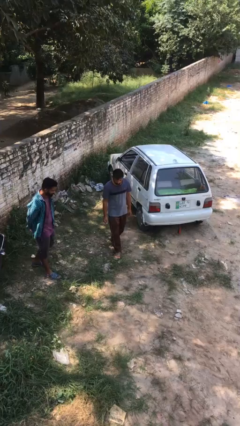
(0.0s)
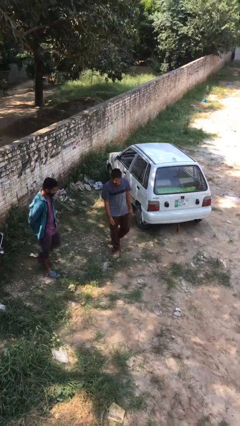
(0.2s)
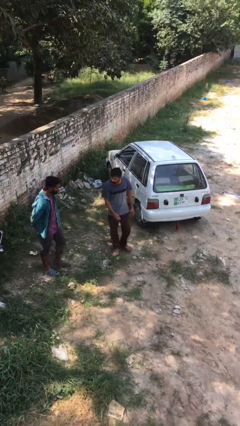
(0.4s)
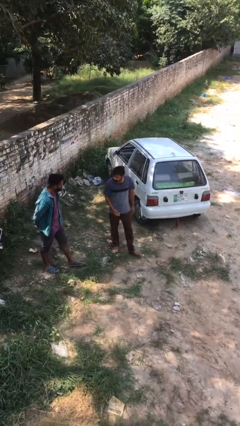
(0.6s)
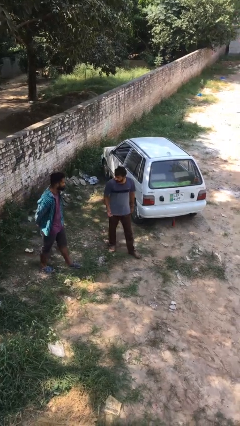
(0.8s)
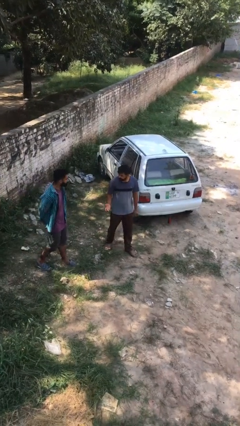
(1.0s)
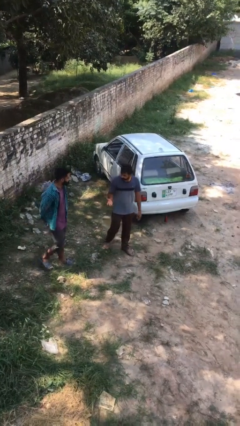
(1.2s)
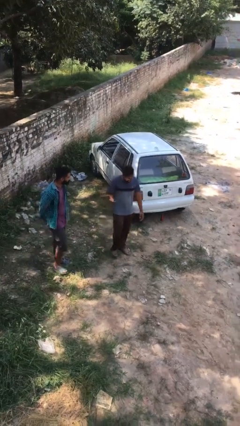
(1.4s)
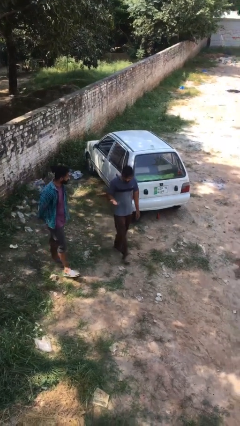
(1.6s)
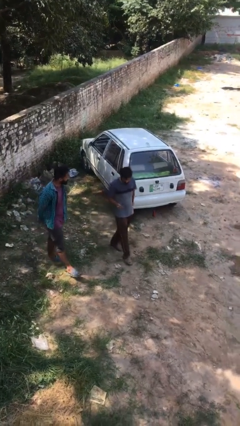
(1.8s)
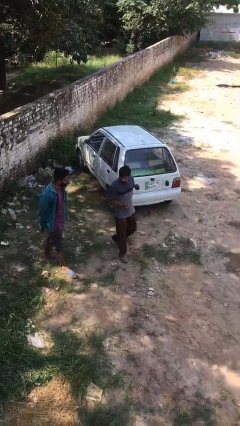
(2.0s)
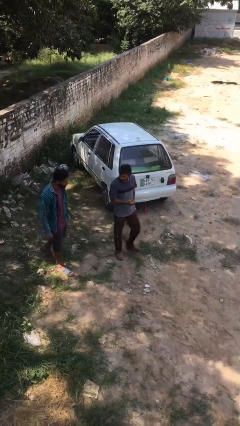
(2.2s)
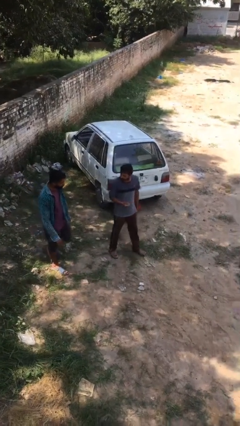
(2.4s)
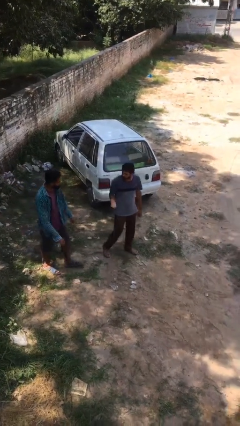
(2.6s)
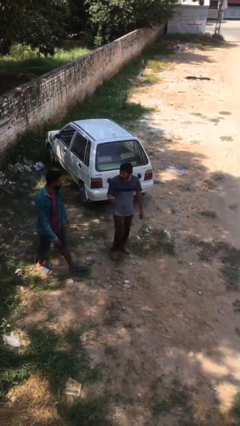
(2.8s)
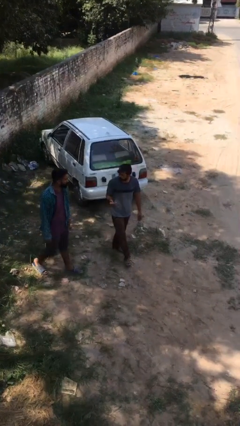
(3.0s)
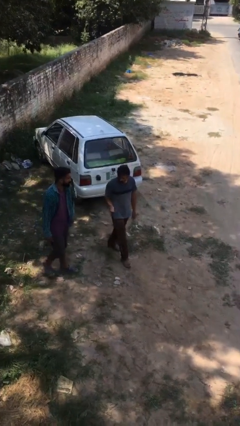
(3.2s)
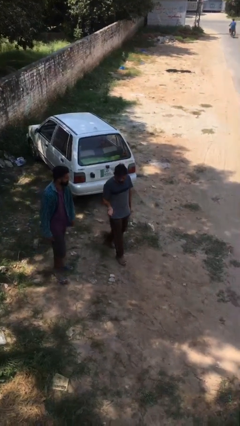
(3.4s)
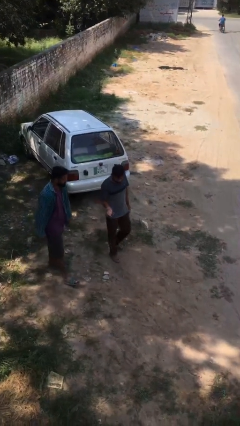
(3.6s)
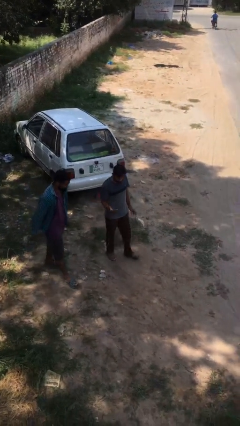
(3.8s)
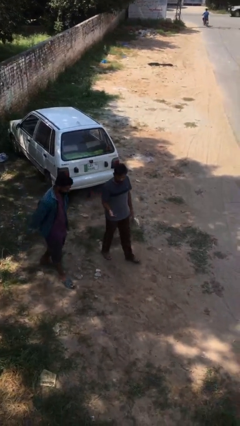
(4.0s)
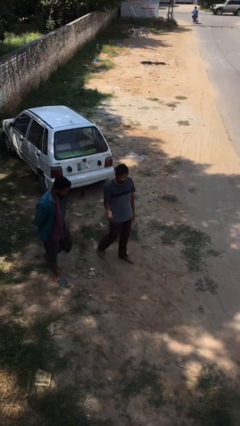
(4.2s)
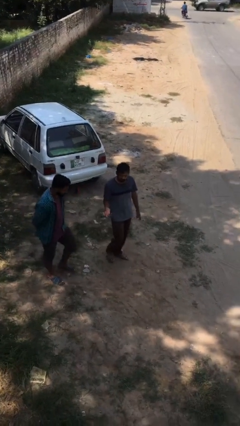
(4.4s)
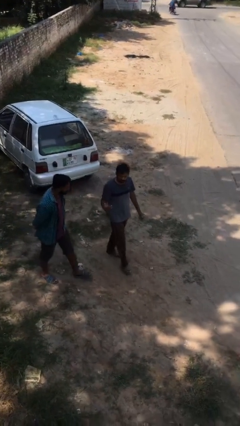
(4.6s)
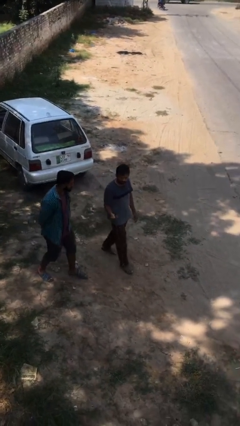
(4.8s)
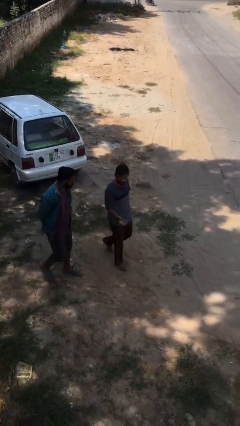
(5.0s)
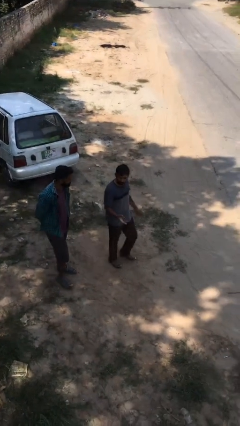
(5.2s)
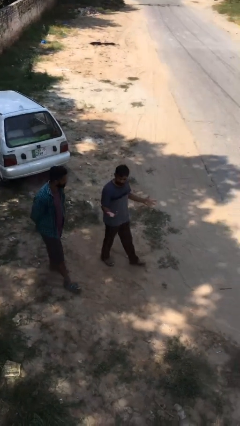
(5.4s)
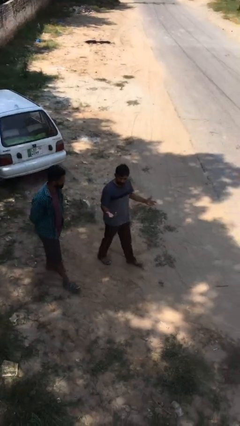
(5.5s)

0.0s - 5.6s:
person talks to person

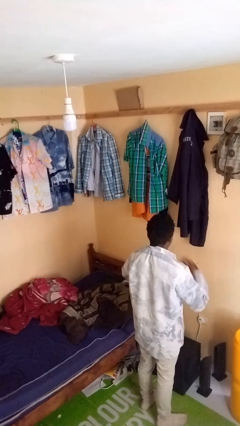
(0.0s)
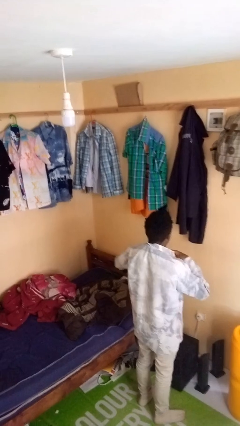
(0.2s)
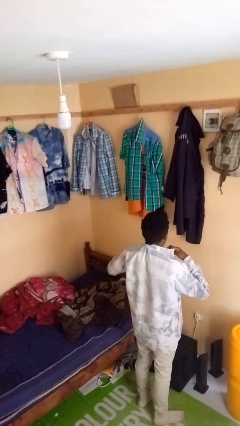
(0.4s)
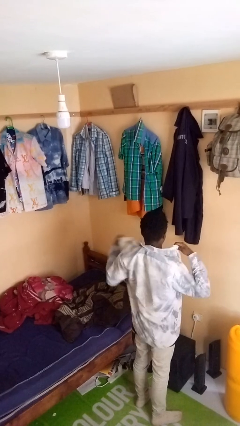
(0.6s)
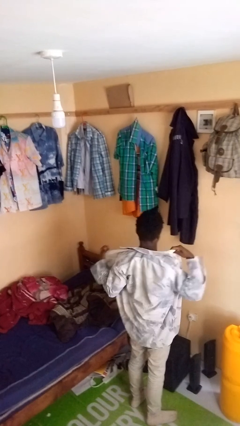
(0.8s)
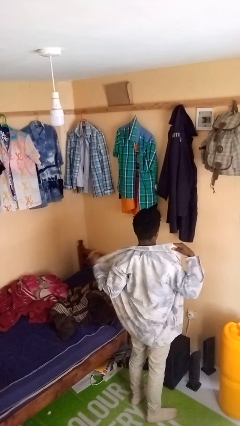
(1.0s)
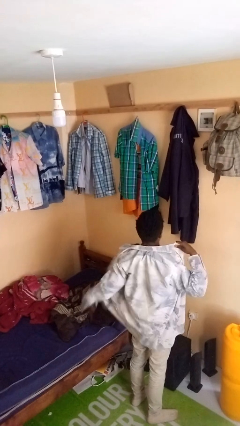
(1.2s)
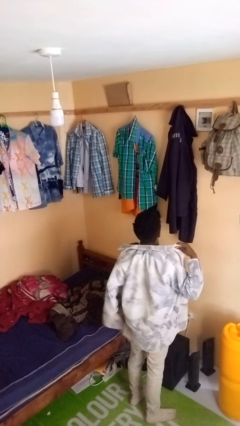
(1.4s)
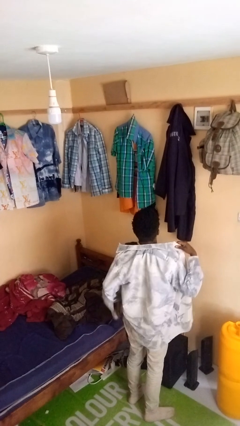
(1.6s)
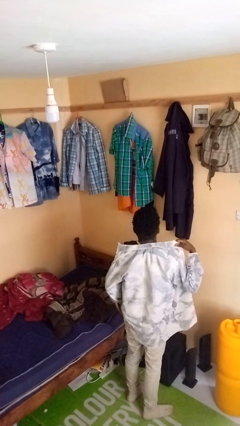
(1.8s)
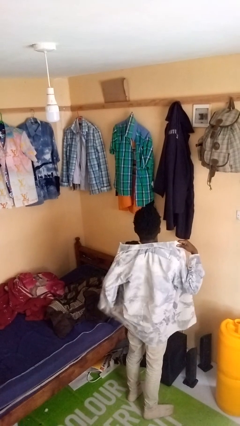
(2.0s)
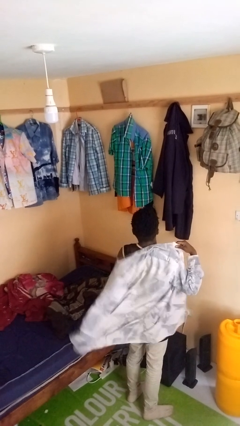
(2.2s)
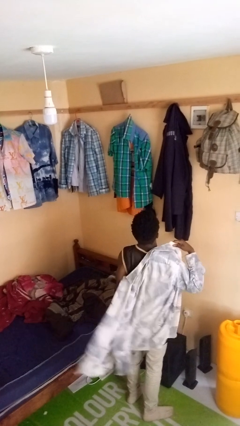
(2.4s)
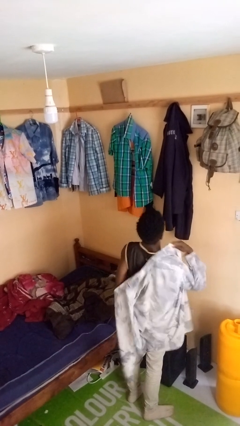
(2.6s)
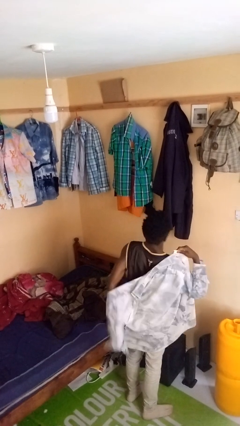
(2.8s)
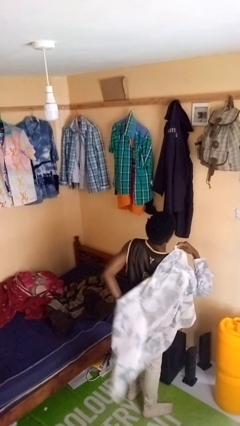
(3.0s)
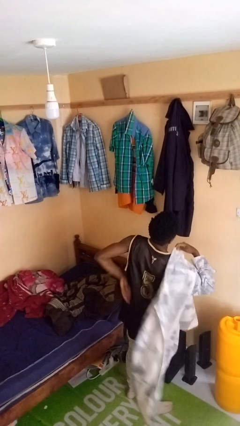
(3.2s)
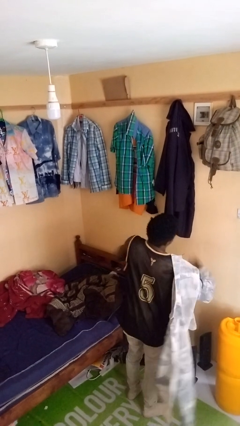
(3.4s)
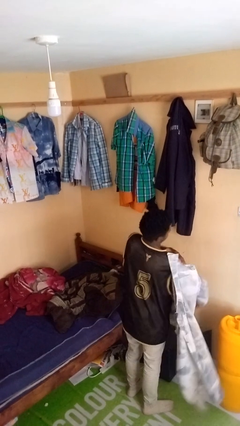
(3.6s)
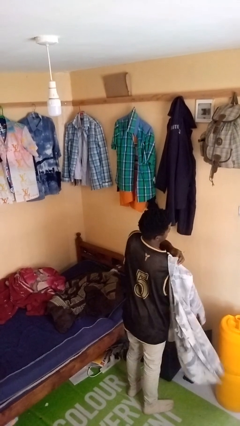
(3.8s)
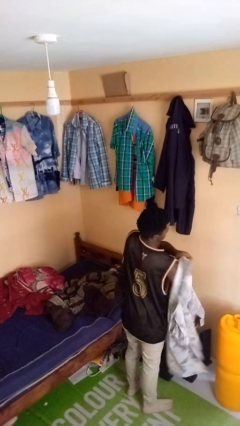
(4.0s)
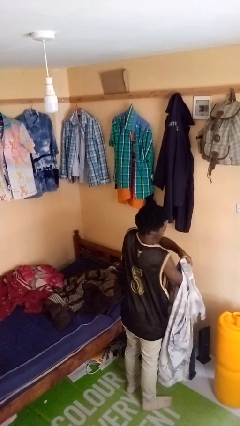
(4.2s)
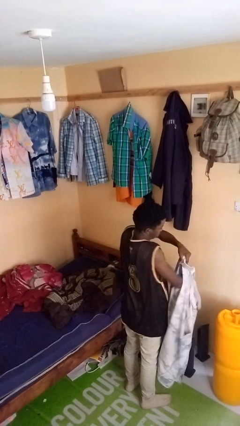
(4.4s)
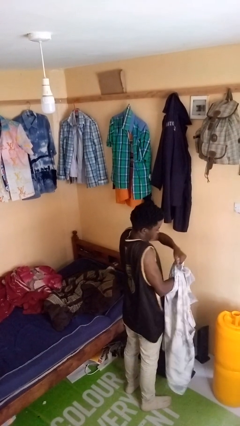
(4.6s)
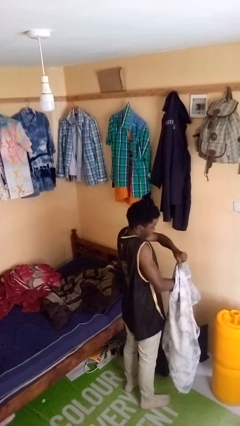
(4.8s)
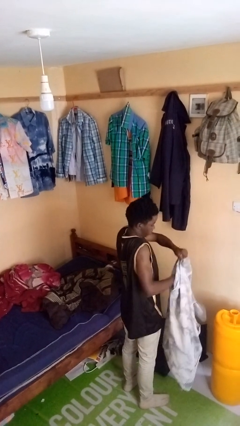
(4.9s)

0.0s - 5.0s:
person takes off shirt

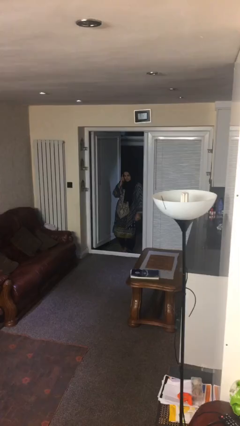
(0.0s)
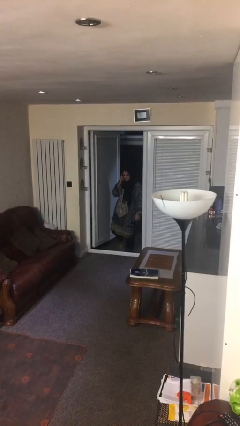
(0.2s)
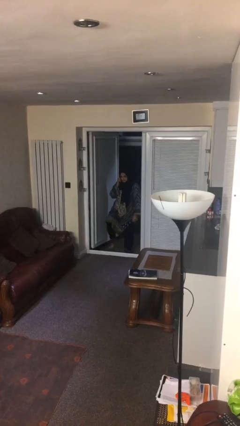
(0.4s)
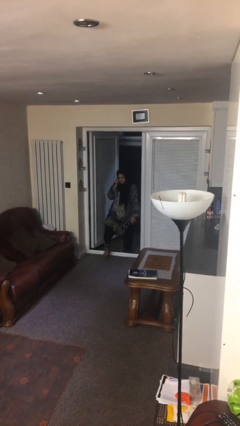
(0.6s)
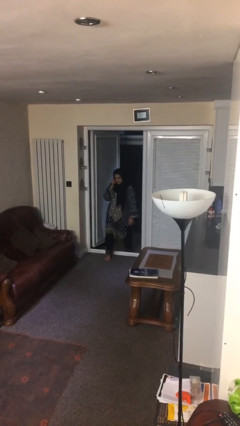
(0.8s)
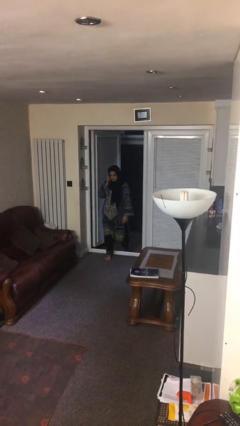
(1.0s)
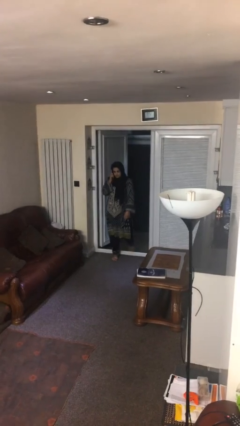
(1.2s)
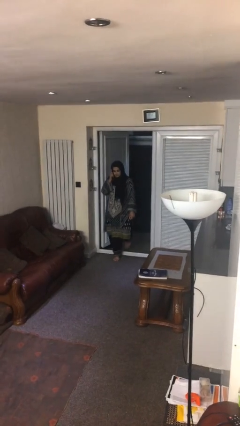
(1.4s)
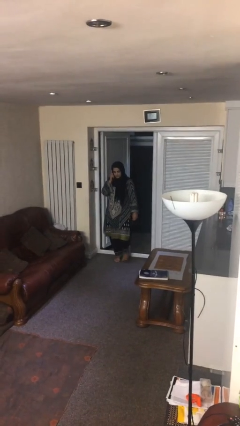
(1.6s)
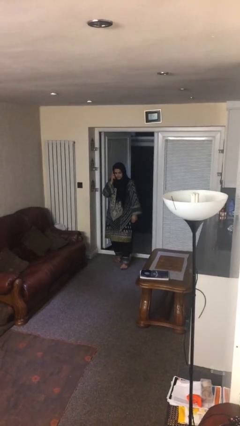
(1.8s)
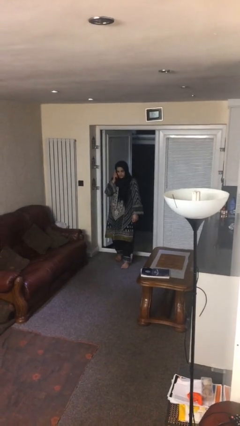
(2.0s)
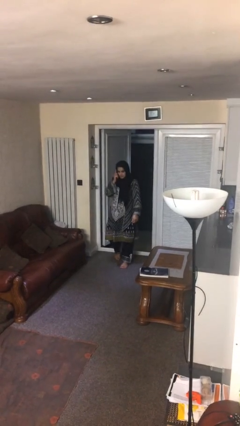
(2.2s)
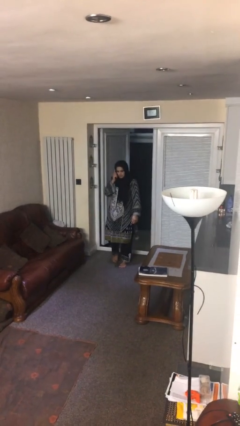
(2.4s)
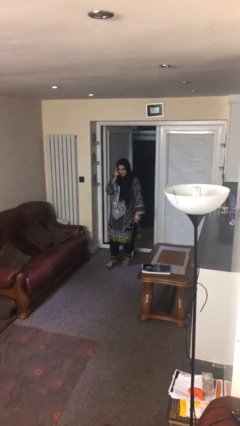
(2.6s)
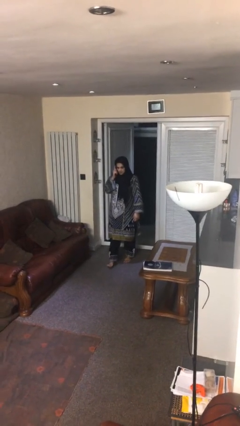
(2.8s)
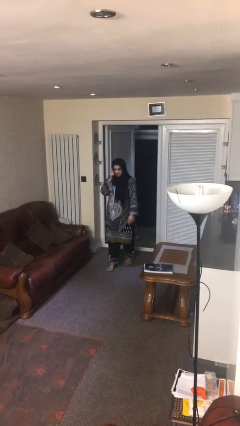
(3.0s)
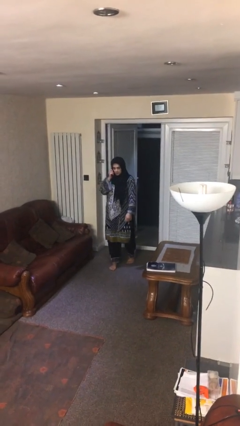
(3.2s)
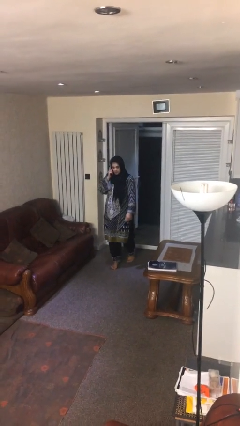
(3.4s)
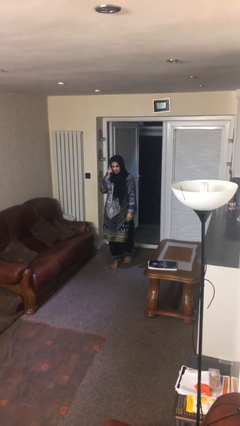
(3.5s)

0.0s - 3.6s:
person enters scene through structure

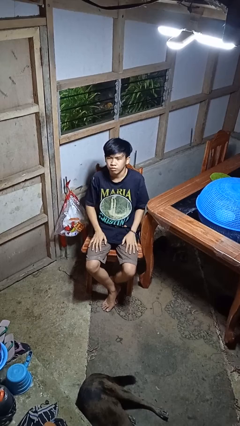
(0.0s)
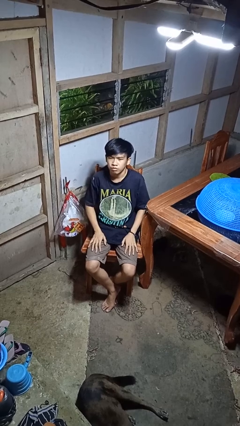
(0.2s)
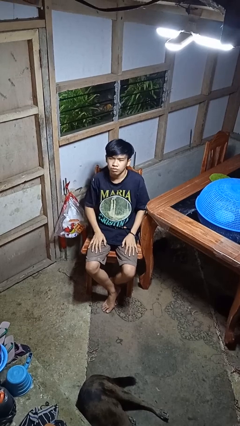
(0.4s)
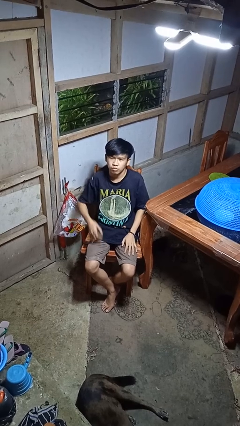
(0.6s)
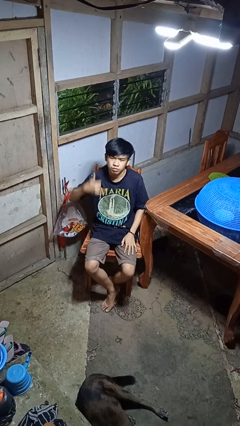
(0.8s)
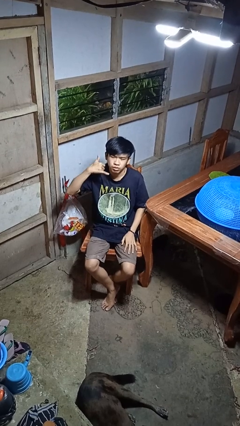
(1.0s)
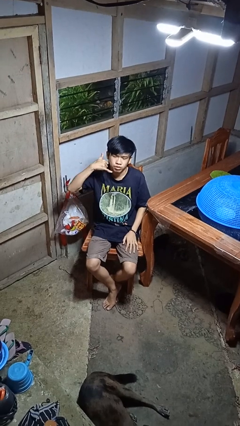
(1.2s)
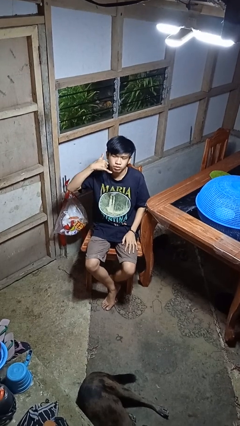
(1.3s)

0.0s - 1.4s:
person gestures call me

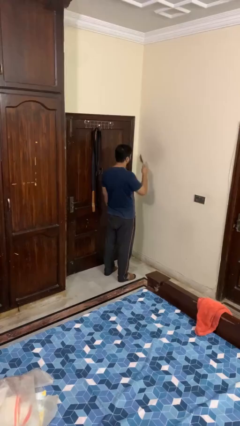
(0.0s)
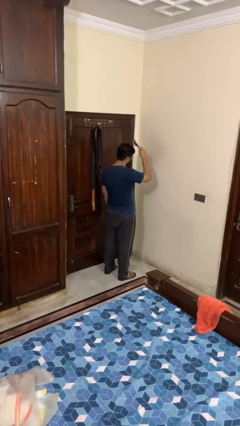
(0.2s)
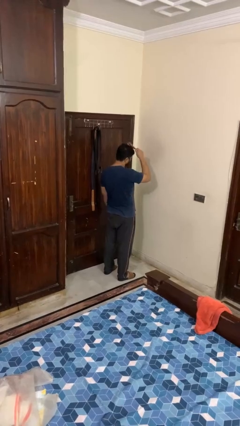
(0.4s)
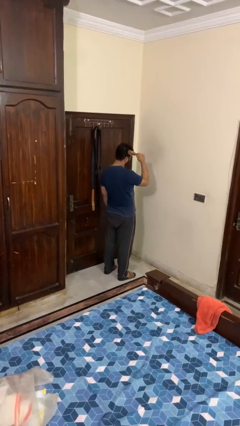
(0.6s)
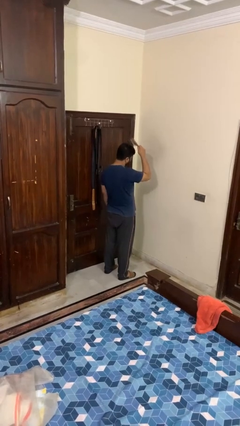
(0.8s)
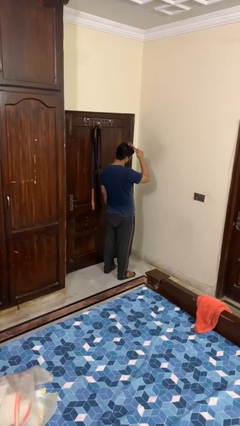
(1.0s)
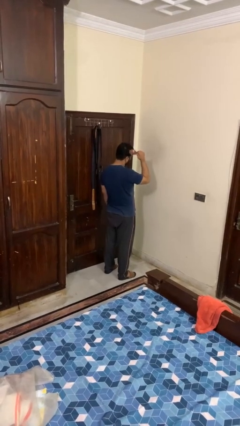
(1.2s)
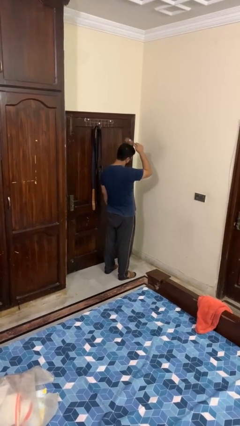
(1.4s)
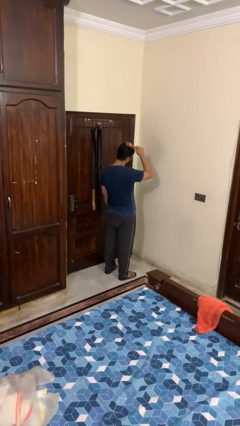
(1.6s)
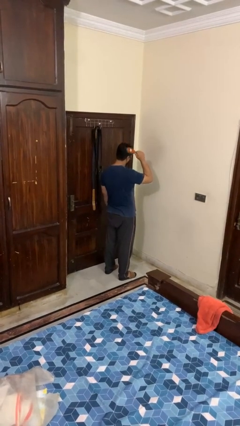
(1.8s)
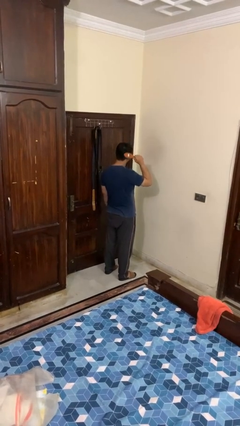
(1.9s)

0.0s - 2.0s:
person brushes hair

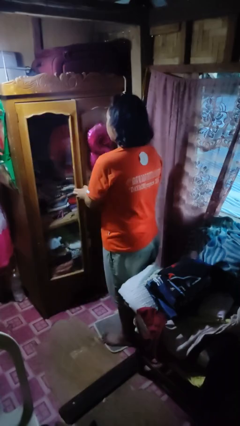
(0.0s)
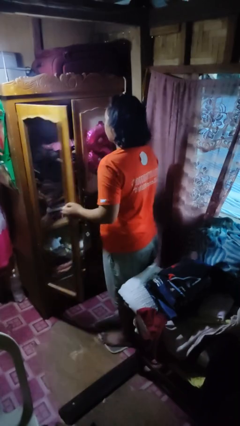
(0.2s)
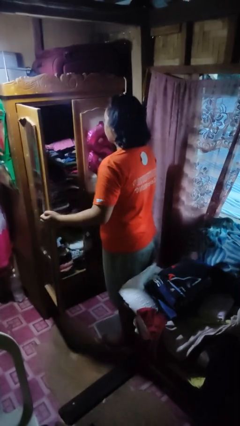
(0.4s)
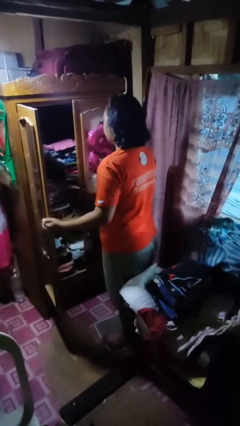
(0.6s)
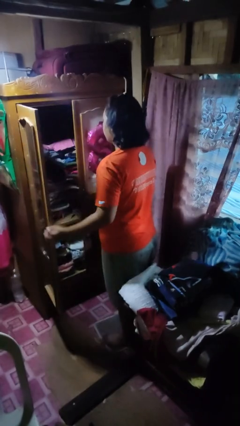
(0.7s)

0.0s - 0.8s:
person opens closet door
